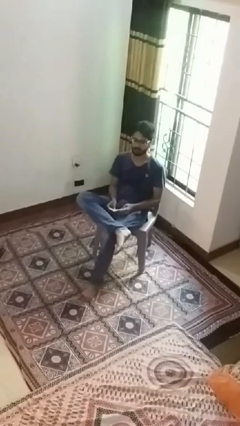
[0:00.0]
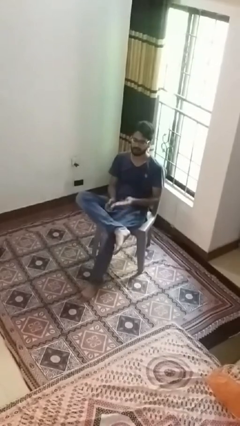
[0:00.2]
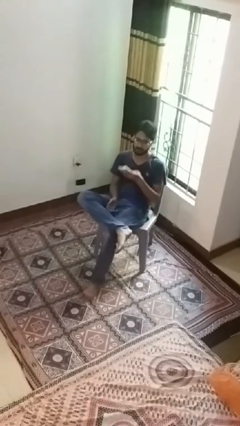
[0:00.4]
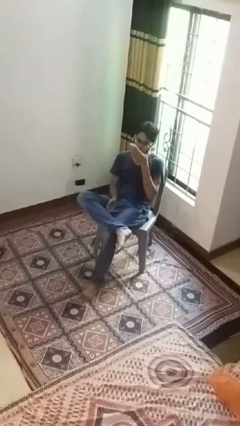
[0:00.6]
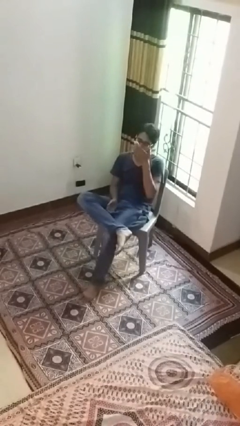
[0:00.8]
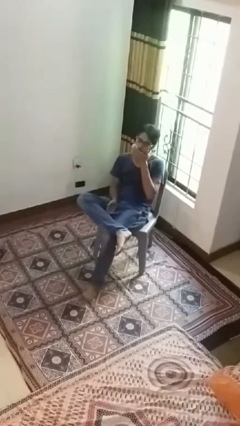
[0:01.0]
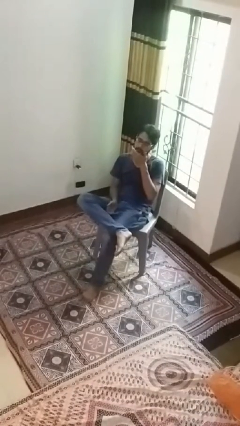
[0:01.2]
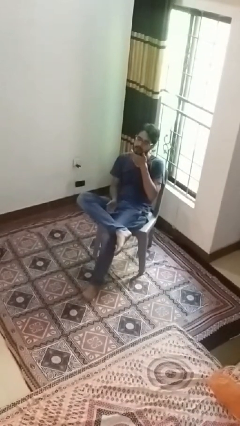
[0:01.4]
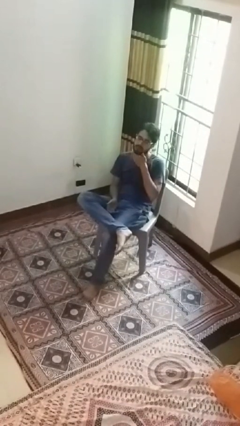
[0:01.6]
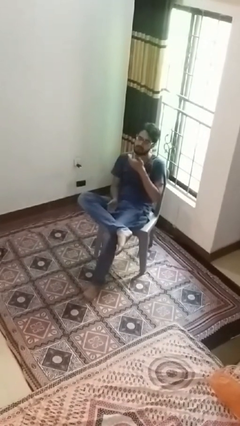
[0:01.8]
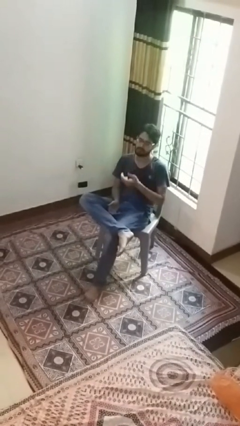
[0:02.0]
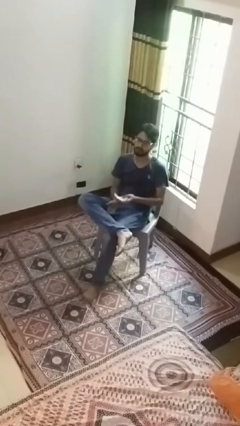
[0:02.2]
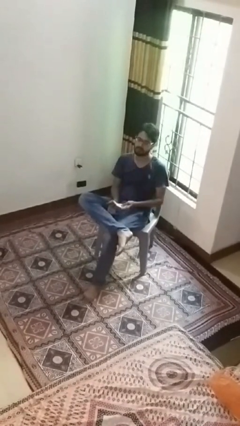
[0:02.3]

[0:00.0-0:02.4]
person wipes mouth with napkin

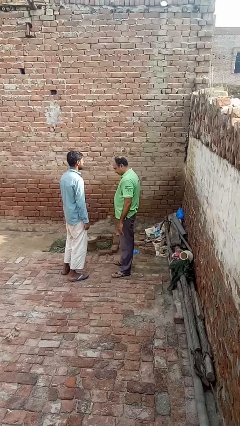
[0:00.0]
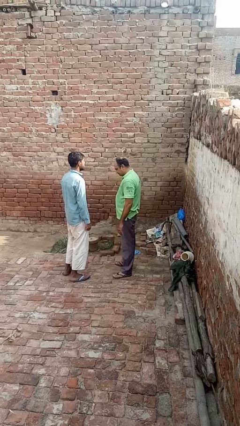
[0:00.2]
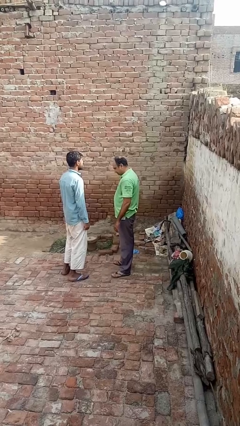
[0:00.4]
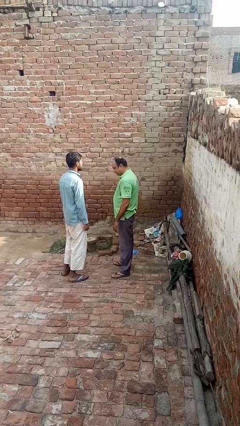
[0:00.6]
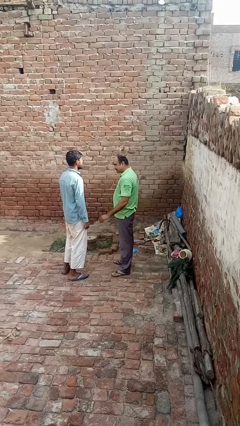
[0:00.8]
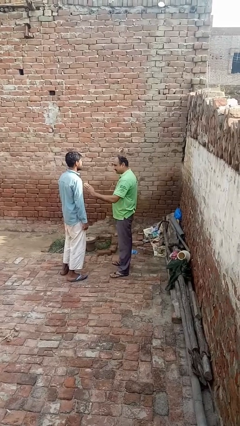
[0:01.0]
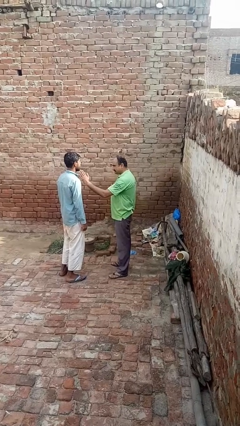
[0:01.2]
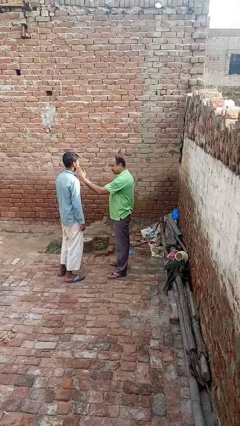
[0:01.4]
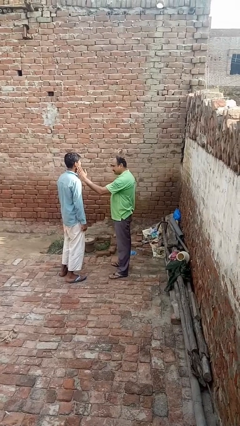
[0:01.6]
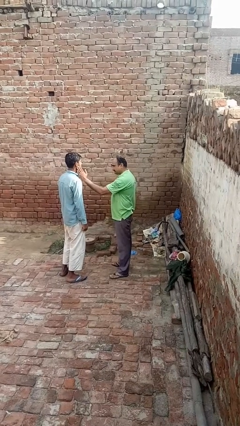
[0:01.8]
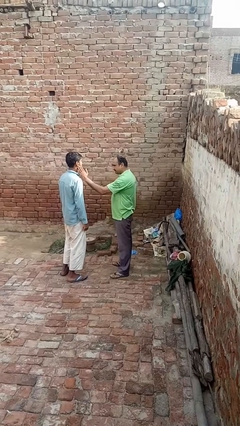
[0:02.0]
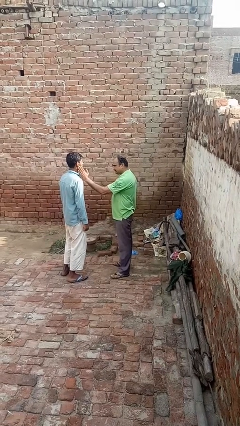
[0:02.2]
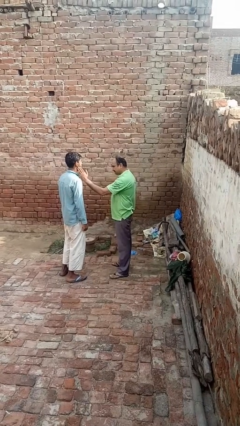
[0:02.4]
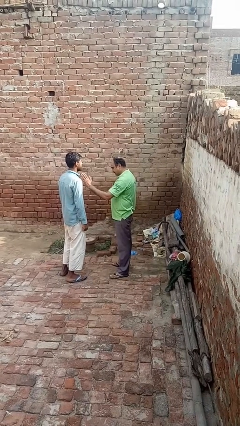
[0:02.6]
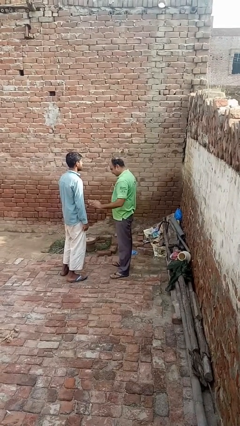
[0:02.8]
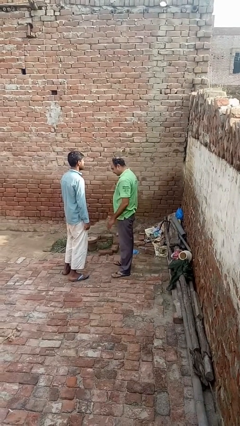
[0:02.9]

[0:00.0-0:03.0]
person touches face of person

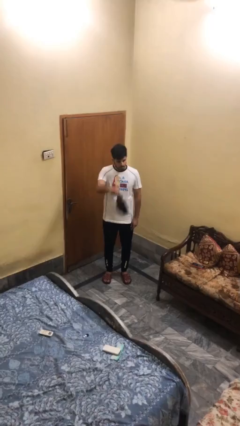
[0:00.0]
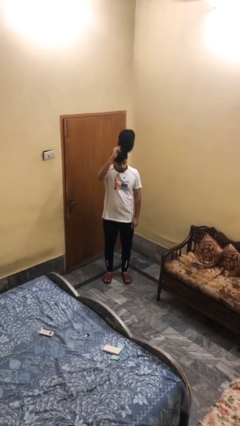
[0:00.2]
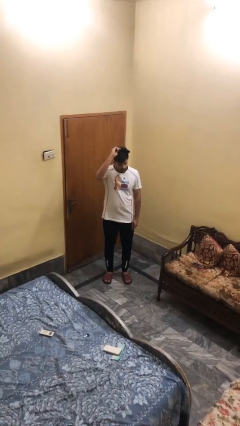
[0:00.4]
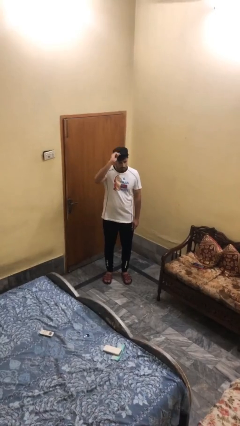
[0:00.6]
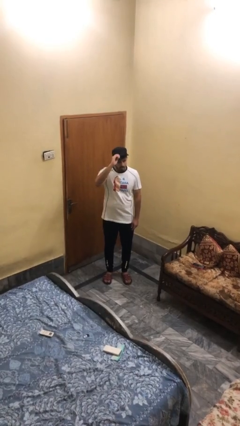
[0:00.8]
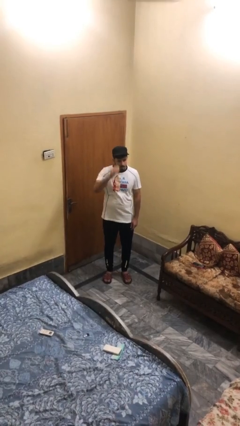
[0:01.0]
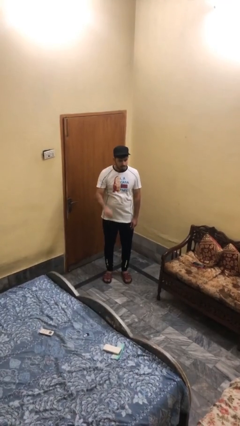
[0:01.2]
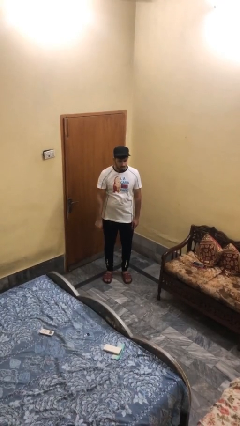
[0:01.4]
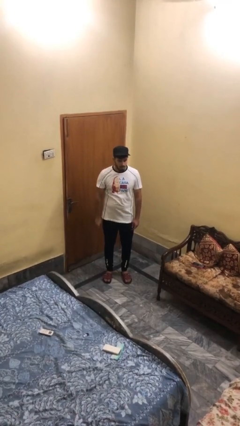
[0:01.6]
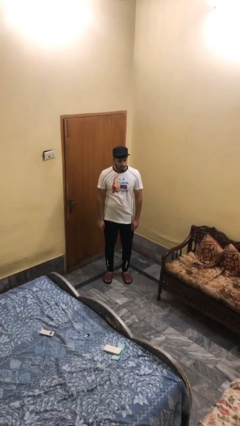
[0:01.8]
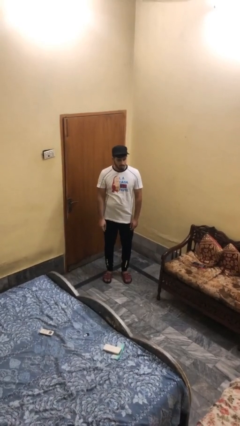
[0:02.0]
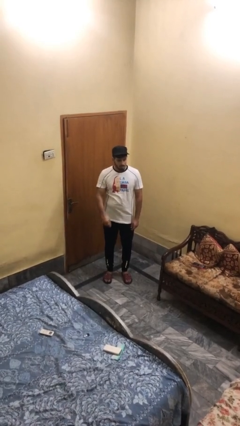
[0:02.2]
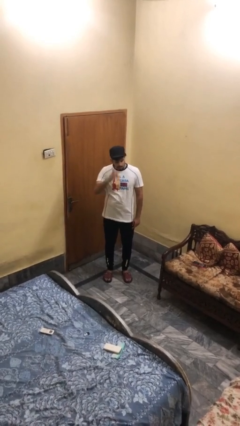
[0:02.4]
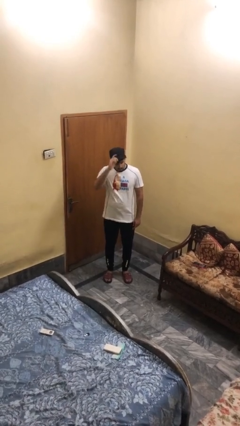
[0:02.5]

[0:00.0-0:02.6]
person puts on hat

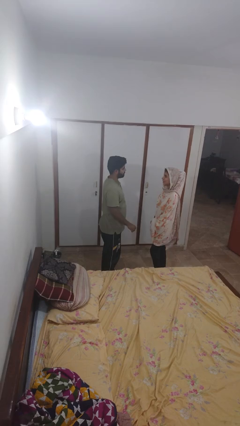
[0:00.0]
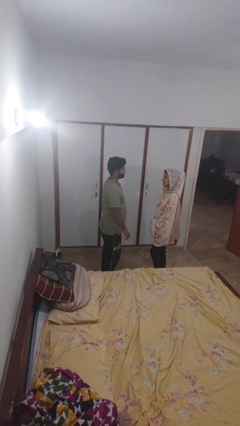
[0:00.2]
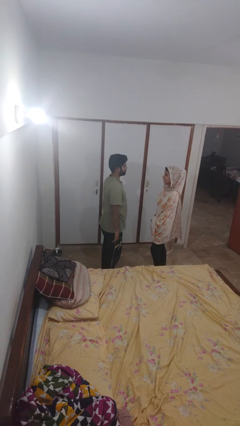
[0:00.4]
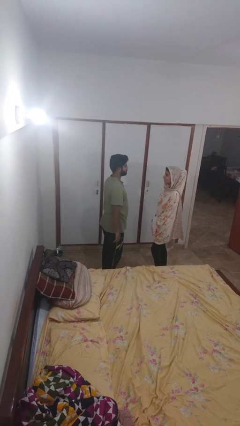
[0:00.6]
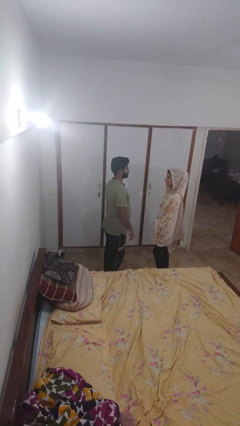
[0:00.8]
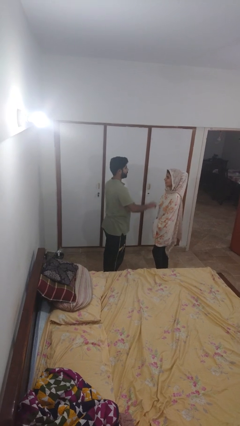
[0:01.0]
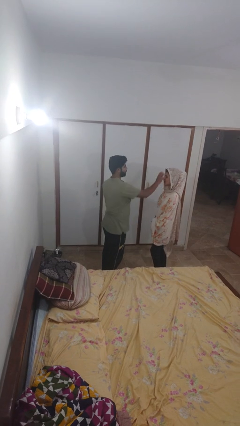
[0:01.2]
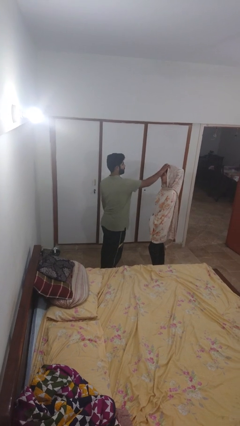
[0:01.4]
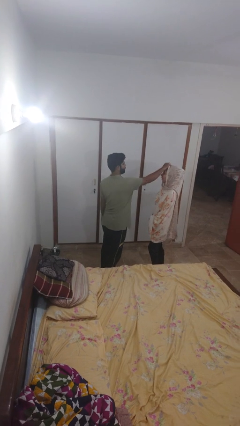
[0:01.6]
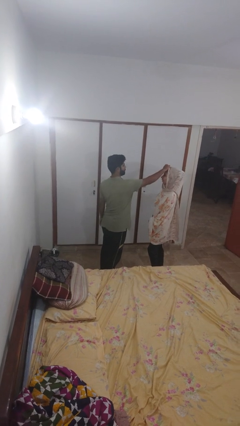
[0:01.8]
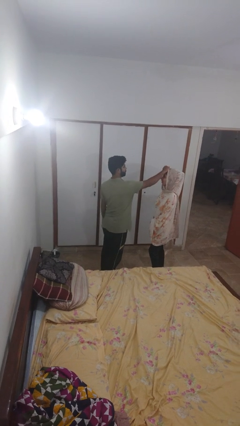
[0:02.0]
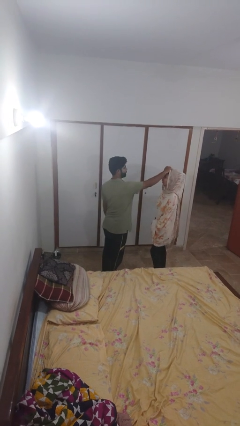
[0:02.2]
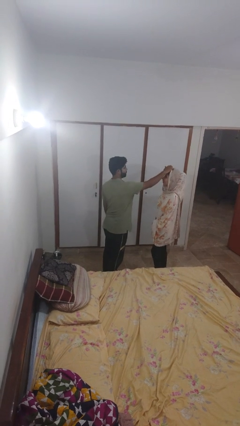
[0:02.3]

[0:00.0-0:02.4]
person grabs person by hair

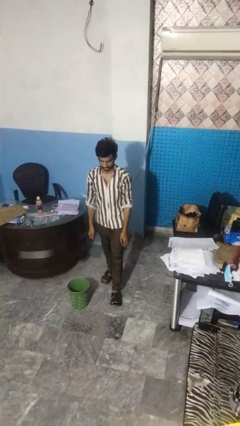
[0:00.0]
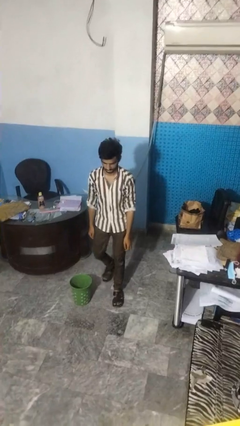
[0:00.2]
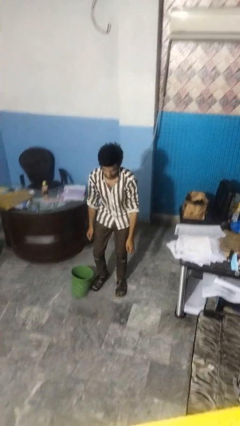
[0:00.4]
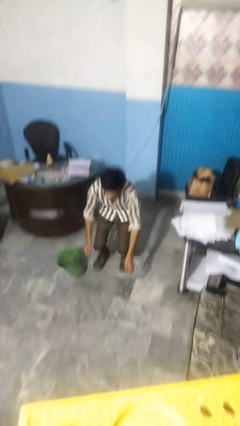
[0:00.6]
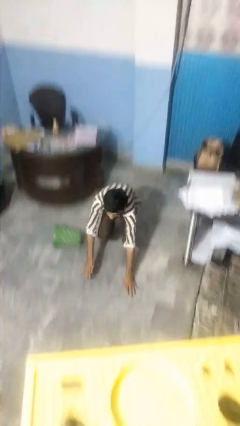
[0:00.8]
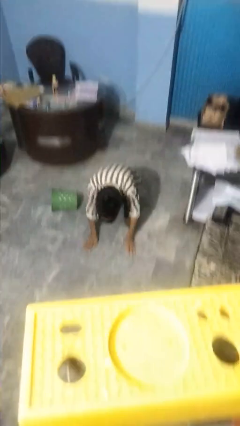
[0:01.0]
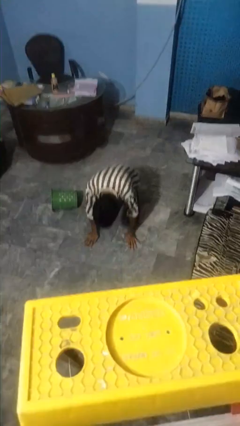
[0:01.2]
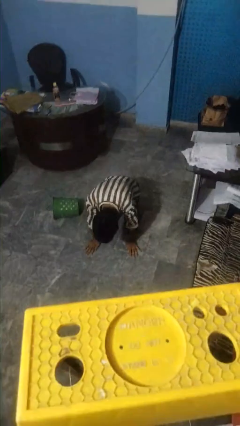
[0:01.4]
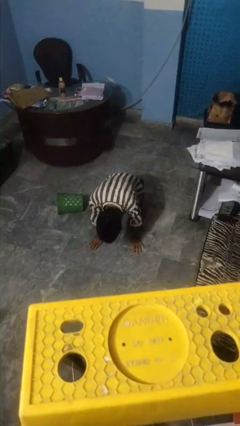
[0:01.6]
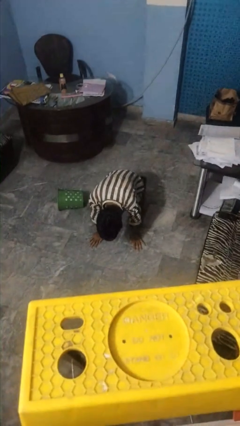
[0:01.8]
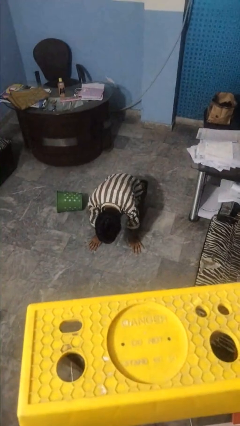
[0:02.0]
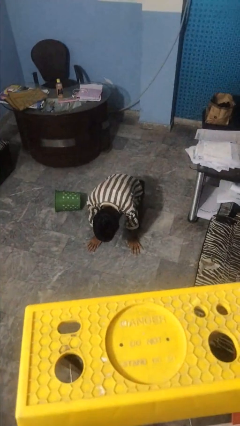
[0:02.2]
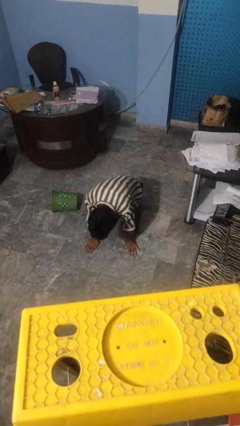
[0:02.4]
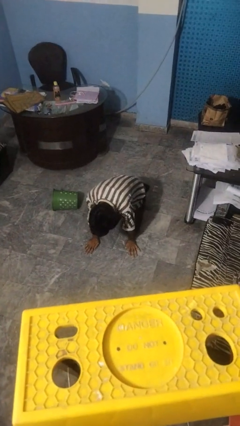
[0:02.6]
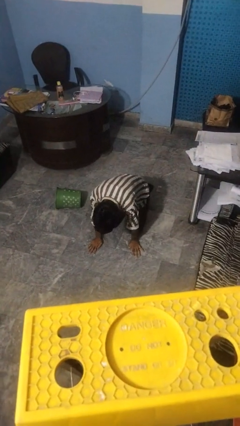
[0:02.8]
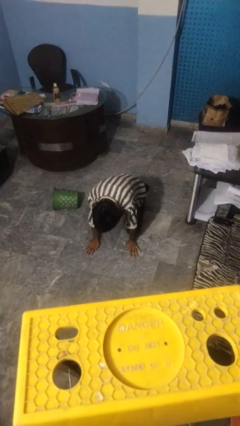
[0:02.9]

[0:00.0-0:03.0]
person trips on object on floor

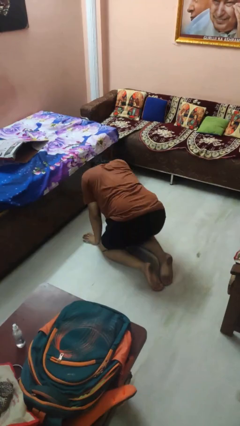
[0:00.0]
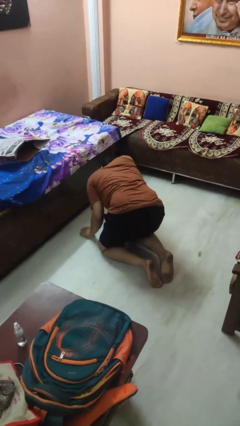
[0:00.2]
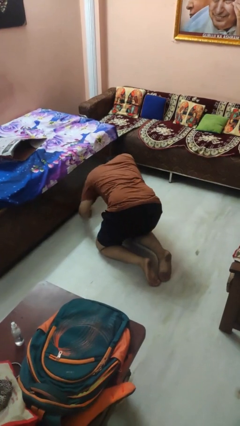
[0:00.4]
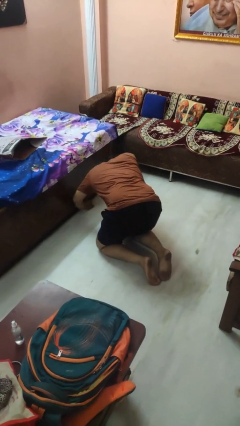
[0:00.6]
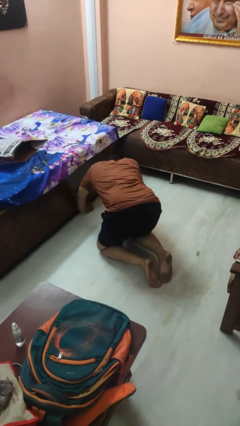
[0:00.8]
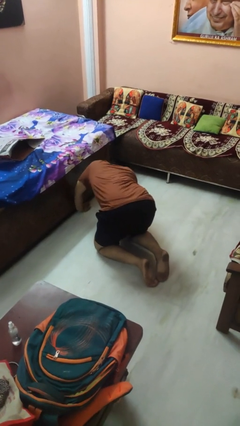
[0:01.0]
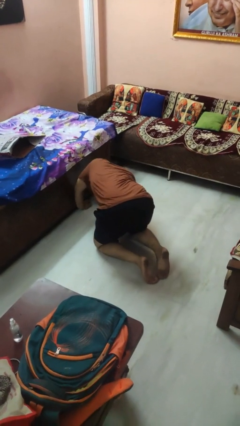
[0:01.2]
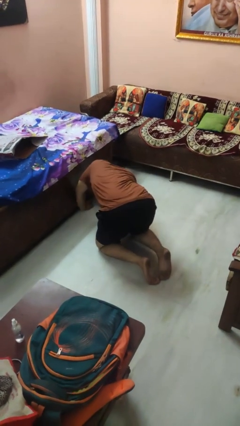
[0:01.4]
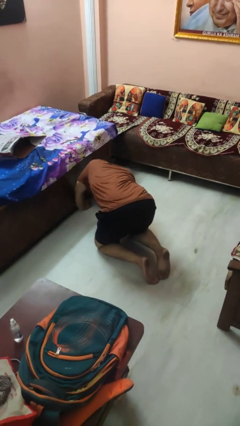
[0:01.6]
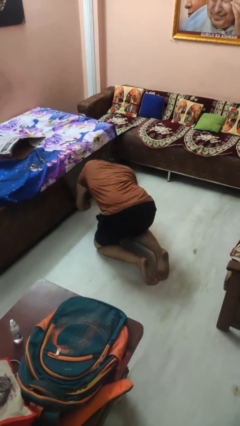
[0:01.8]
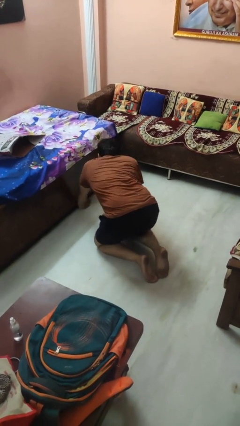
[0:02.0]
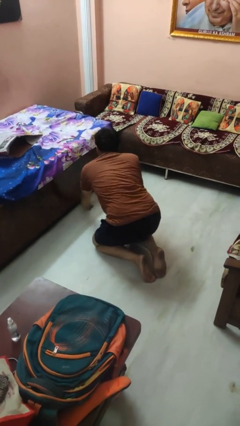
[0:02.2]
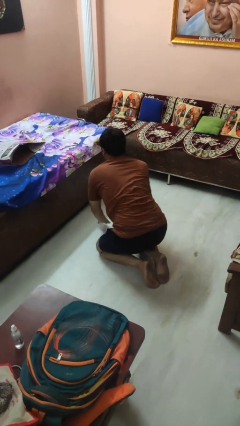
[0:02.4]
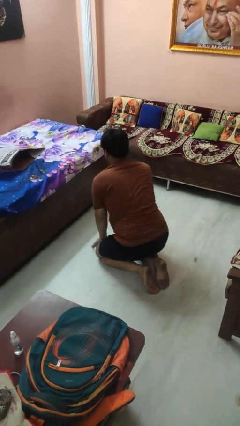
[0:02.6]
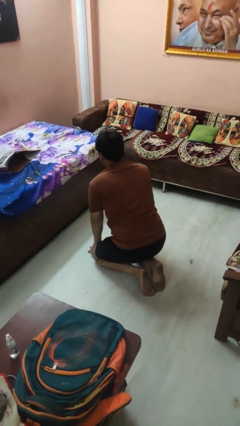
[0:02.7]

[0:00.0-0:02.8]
person searches under bed

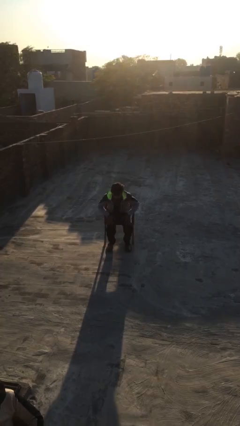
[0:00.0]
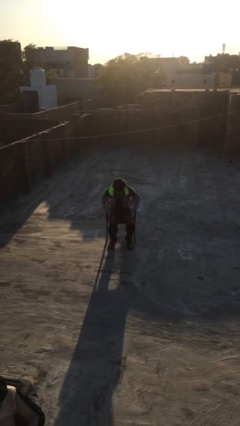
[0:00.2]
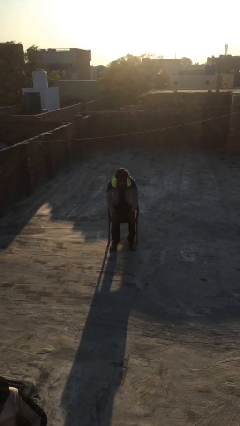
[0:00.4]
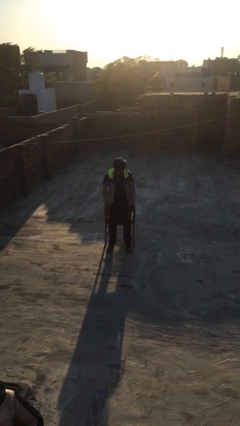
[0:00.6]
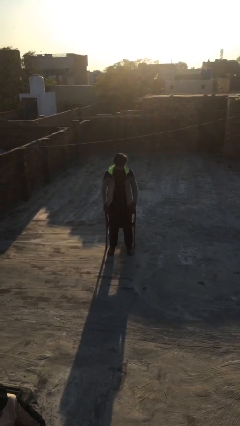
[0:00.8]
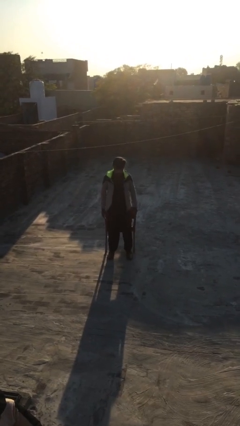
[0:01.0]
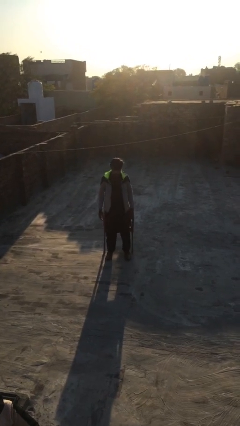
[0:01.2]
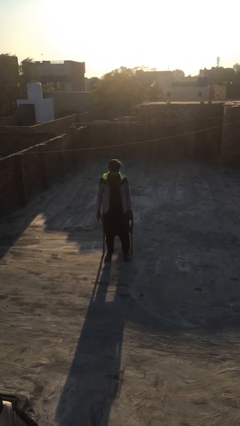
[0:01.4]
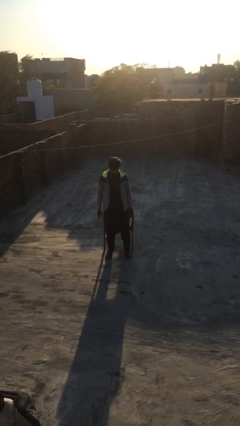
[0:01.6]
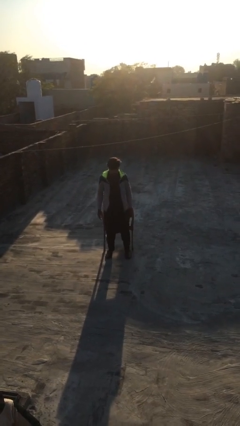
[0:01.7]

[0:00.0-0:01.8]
person stands up
